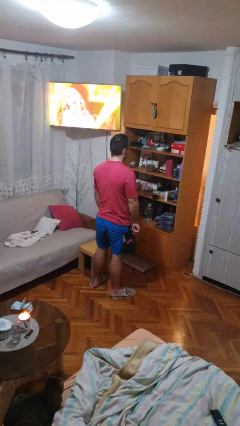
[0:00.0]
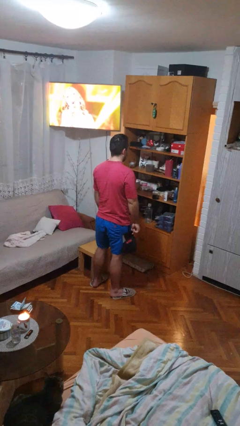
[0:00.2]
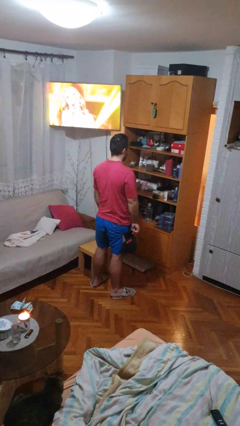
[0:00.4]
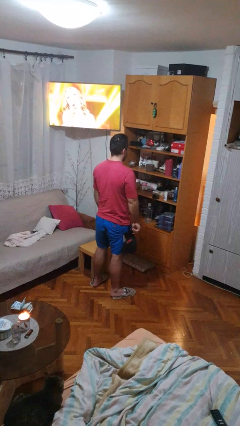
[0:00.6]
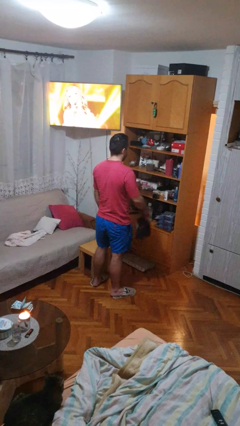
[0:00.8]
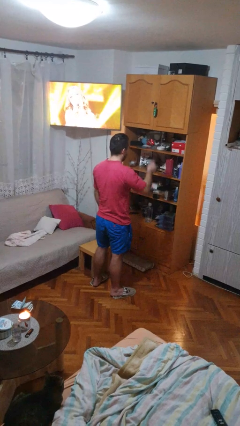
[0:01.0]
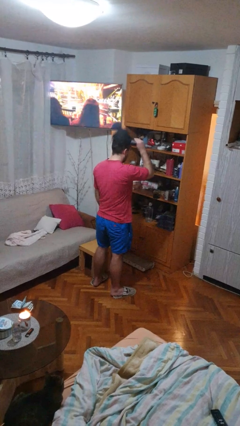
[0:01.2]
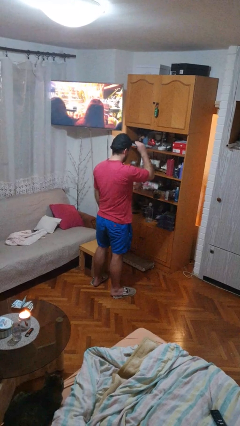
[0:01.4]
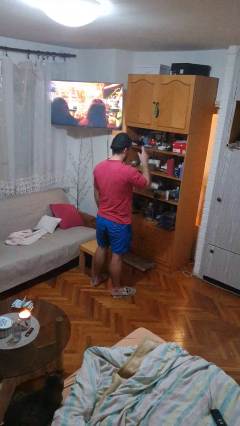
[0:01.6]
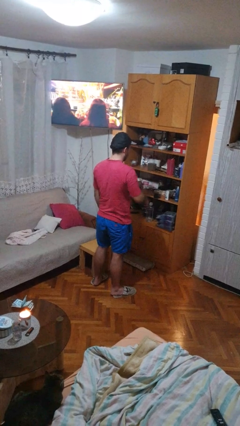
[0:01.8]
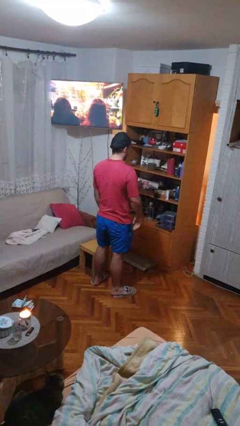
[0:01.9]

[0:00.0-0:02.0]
person puts on hat

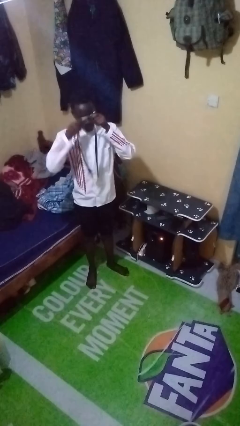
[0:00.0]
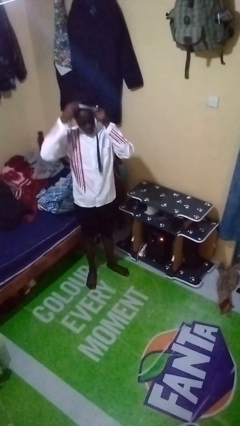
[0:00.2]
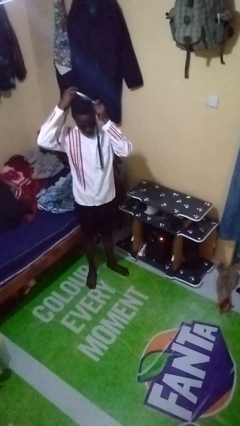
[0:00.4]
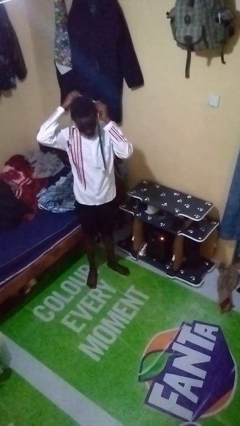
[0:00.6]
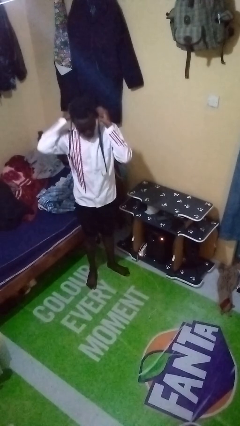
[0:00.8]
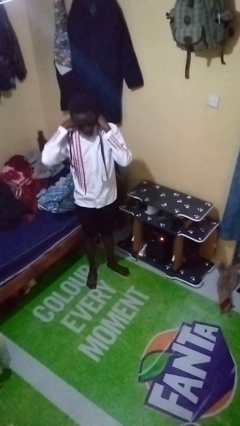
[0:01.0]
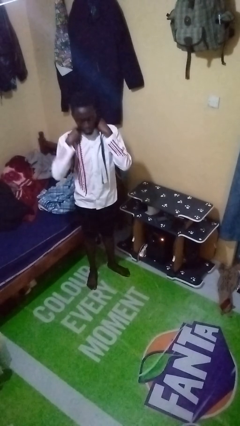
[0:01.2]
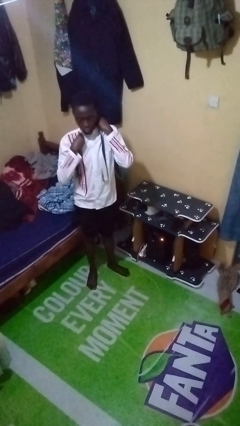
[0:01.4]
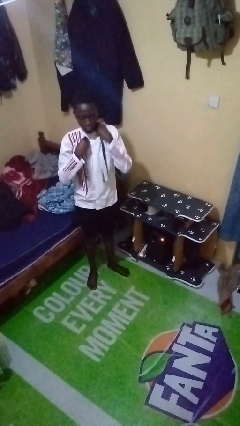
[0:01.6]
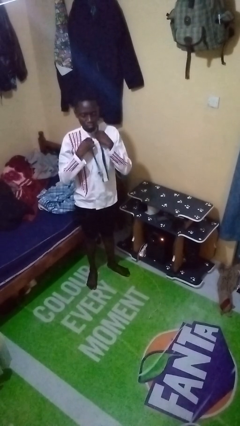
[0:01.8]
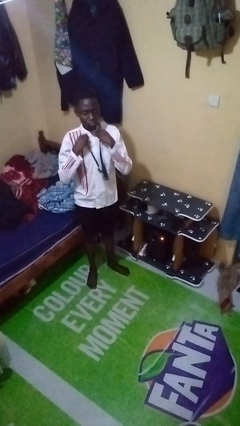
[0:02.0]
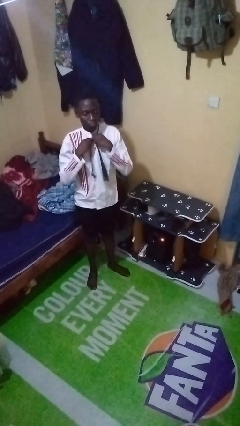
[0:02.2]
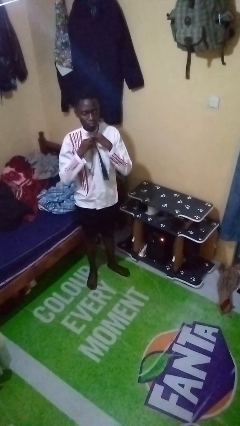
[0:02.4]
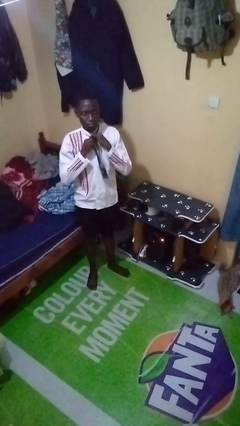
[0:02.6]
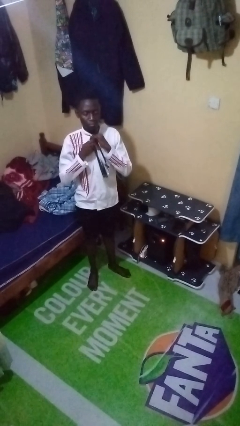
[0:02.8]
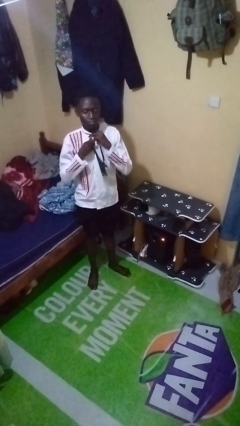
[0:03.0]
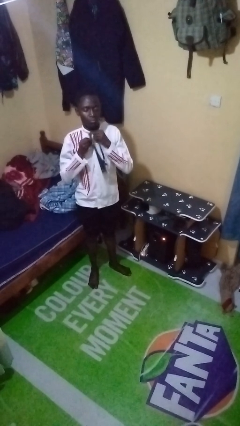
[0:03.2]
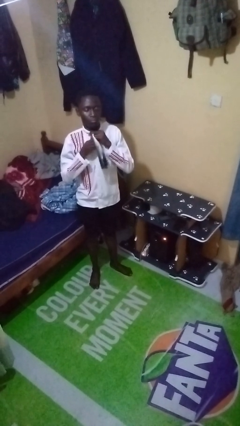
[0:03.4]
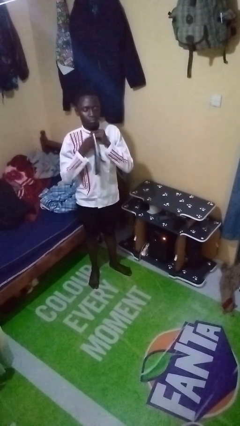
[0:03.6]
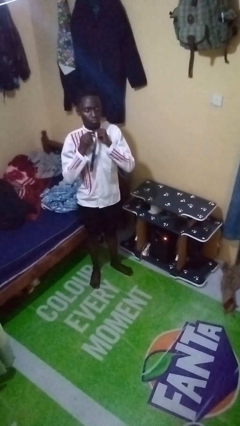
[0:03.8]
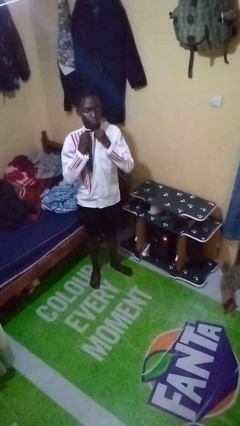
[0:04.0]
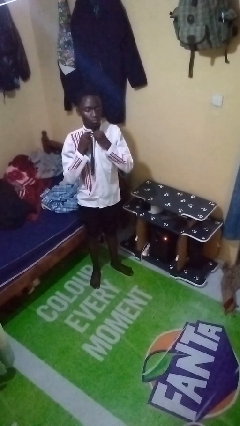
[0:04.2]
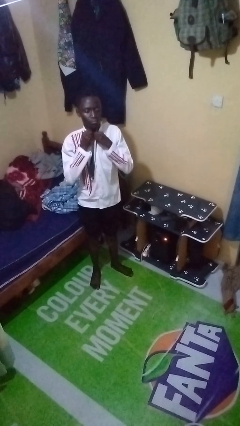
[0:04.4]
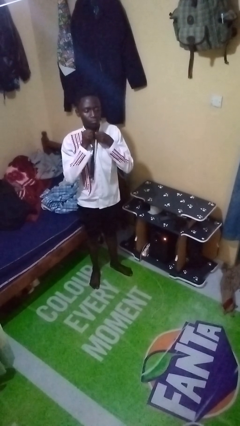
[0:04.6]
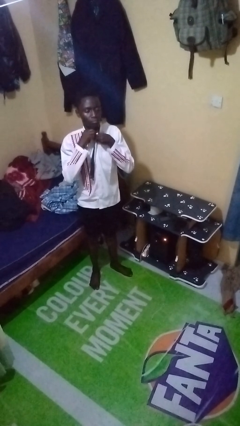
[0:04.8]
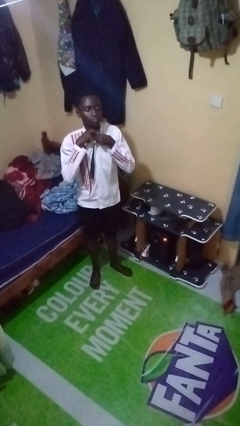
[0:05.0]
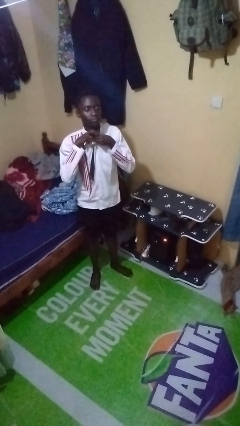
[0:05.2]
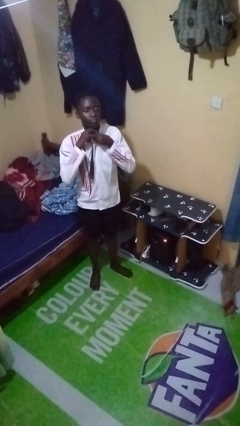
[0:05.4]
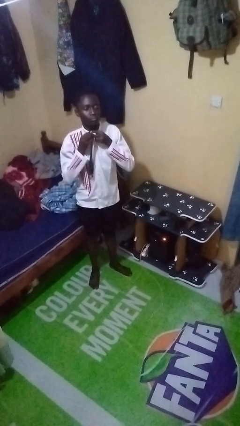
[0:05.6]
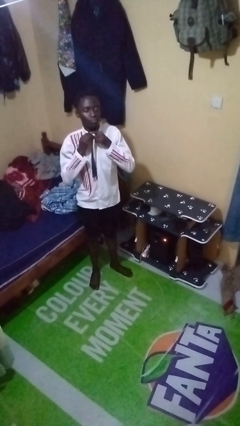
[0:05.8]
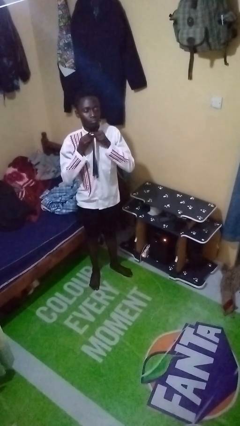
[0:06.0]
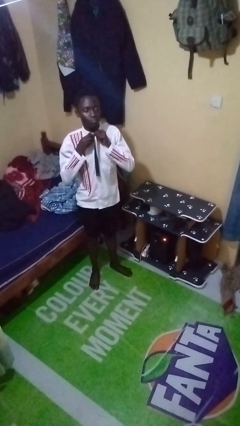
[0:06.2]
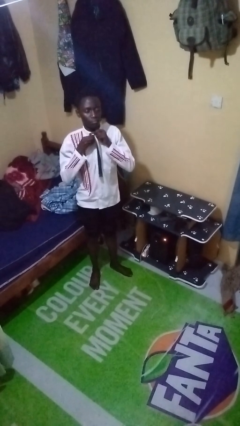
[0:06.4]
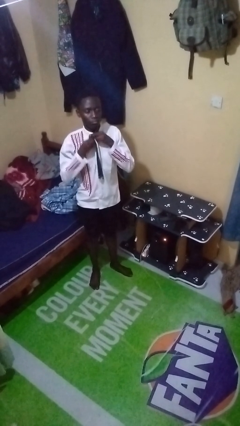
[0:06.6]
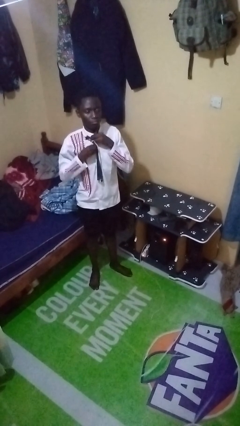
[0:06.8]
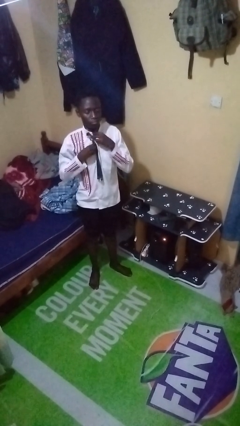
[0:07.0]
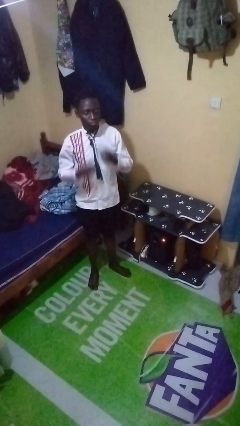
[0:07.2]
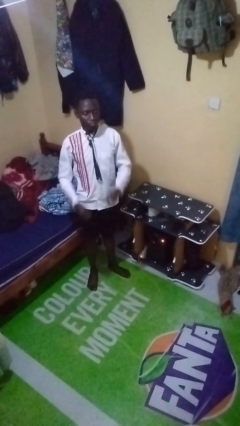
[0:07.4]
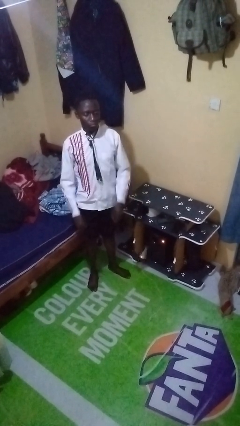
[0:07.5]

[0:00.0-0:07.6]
person puts on necktie

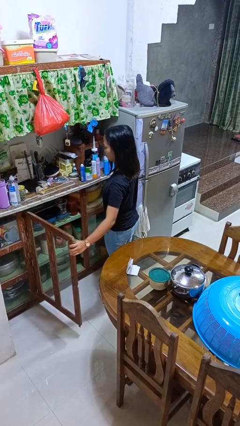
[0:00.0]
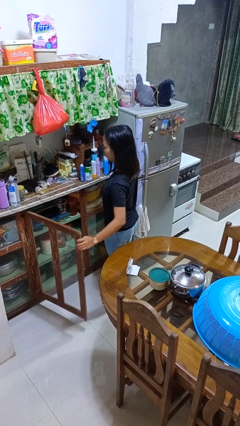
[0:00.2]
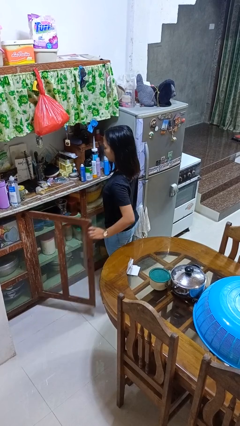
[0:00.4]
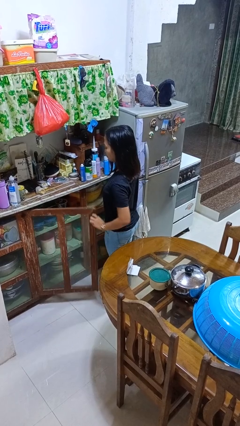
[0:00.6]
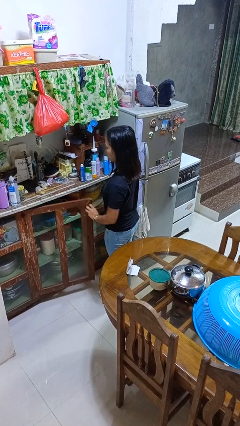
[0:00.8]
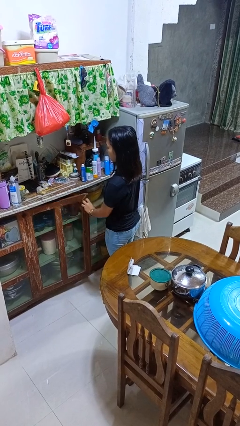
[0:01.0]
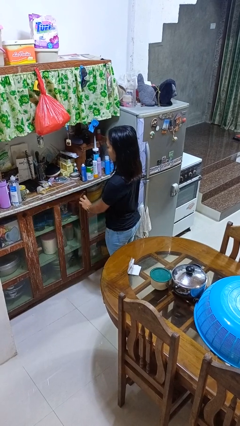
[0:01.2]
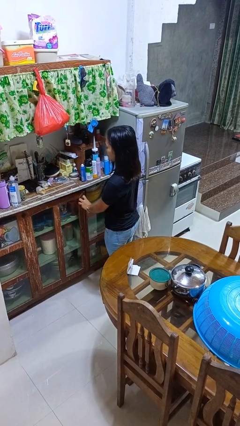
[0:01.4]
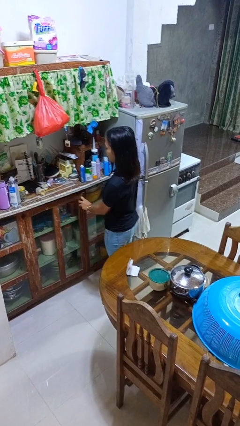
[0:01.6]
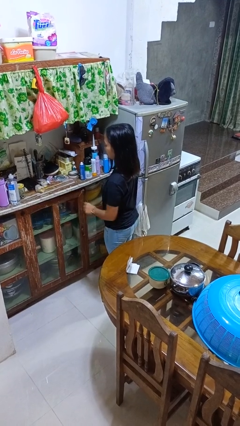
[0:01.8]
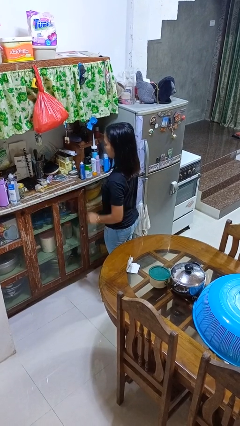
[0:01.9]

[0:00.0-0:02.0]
person closes cabinet

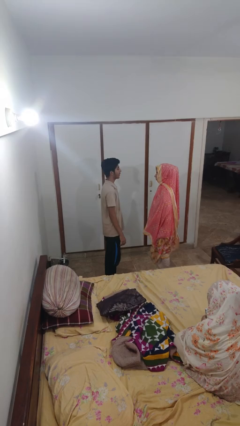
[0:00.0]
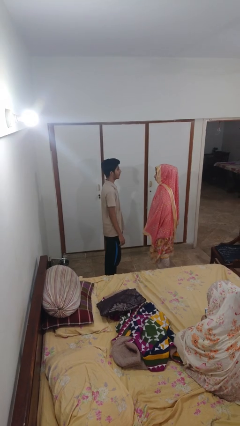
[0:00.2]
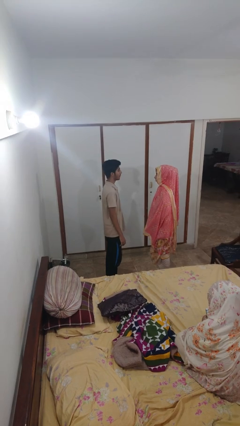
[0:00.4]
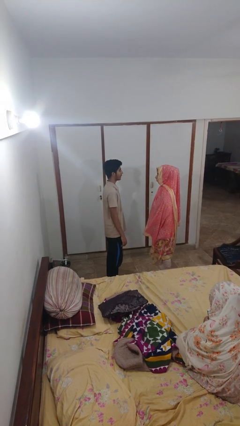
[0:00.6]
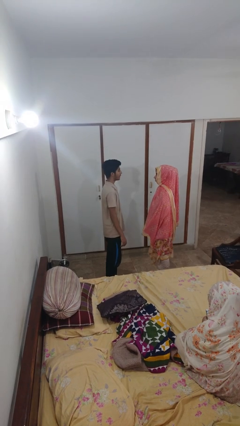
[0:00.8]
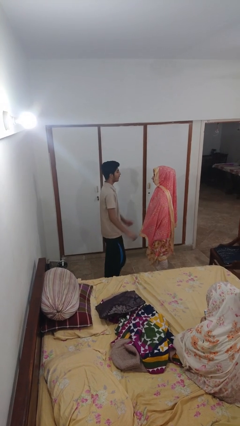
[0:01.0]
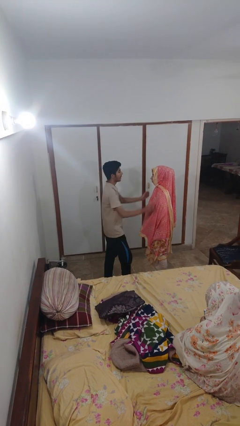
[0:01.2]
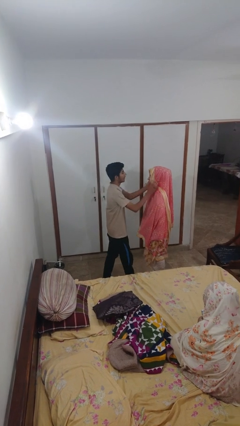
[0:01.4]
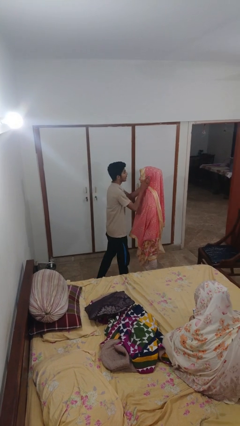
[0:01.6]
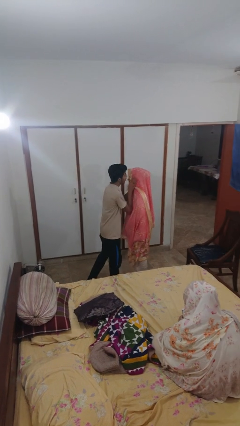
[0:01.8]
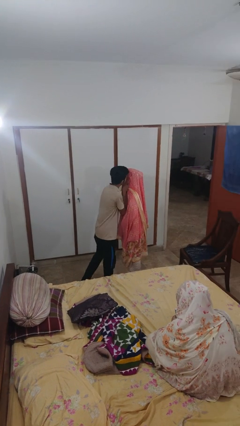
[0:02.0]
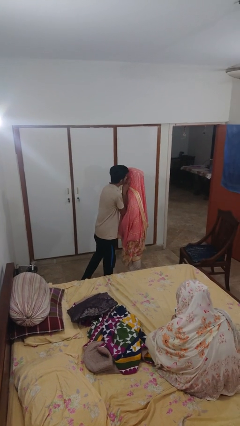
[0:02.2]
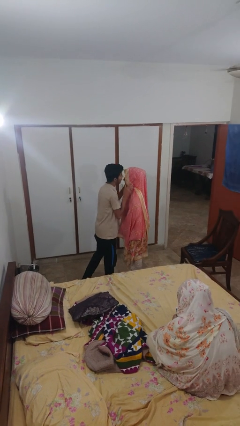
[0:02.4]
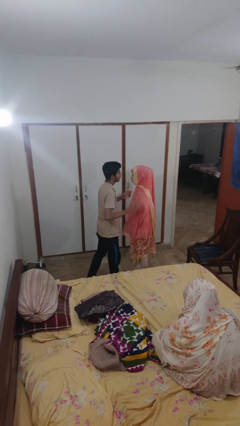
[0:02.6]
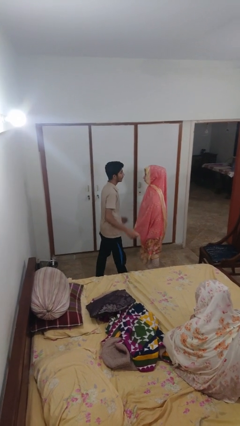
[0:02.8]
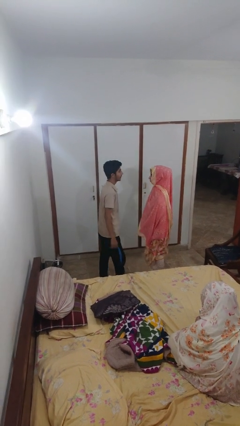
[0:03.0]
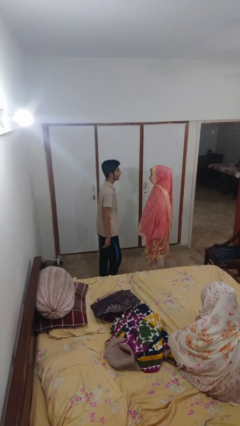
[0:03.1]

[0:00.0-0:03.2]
person kisses cheek of person

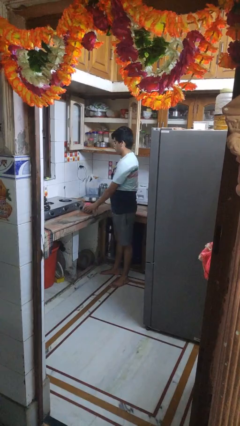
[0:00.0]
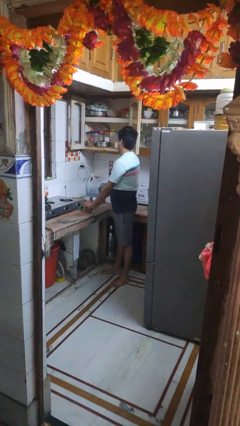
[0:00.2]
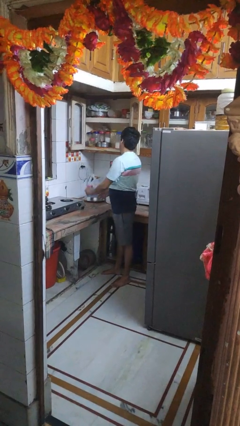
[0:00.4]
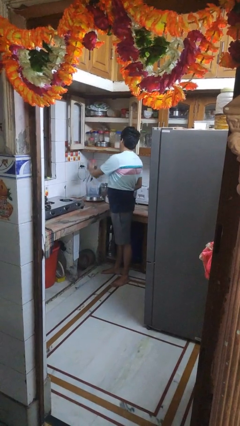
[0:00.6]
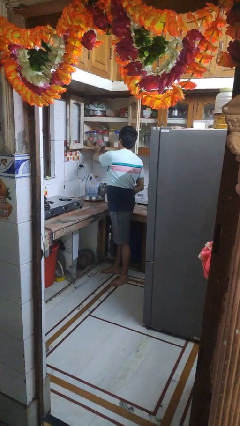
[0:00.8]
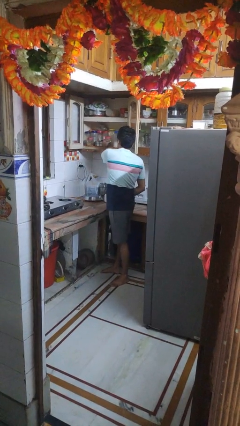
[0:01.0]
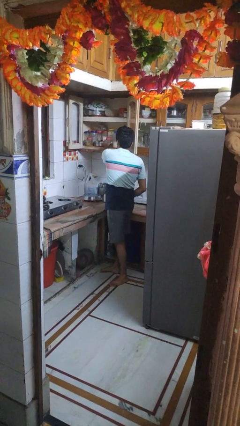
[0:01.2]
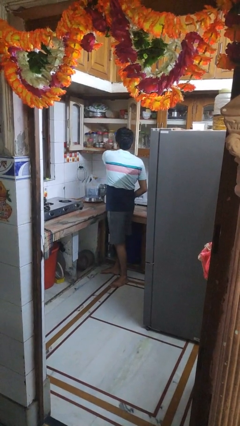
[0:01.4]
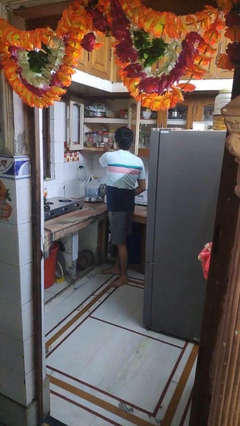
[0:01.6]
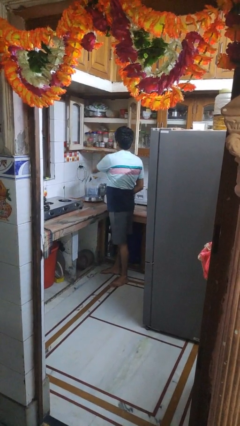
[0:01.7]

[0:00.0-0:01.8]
person puts object in cabinet

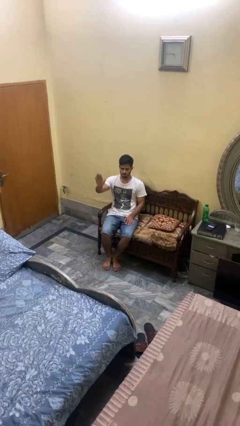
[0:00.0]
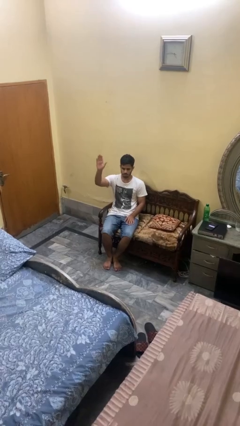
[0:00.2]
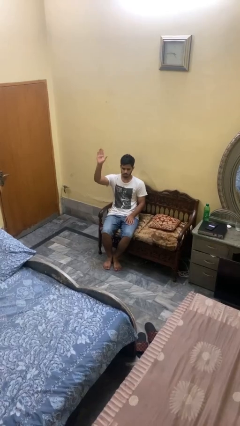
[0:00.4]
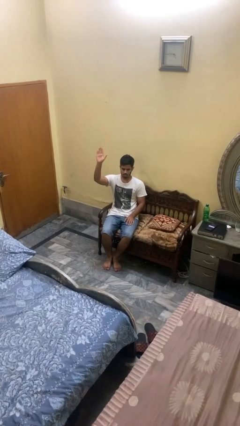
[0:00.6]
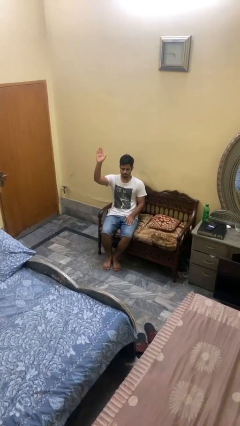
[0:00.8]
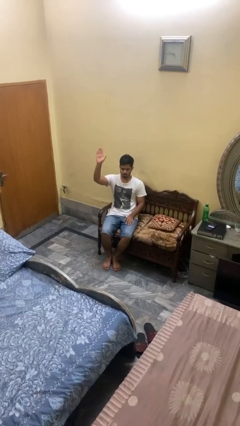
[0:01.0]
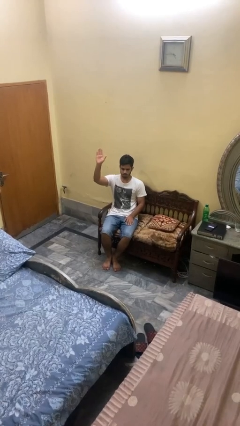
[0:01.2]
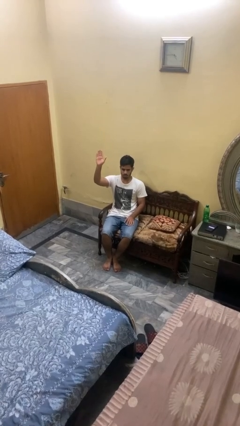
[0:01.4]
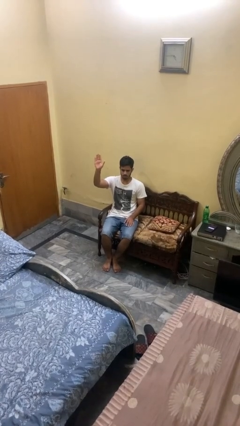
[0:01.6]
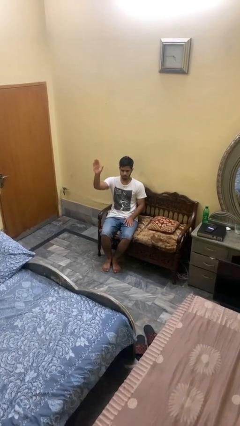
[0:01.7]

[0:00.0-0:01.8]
person gestures raise hand
